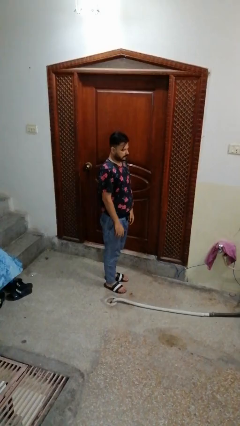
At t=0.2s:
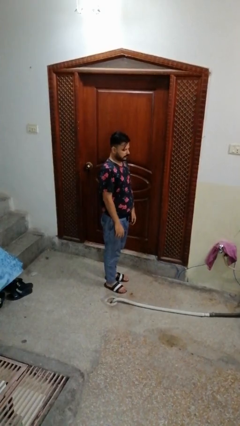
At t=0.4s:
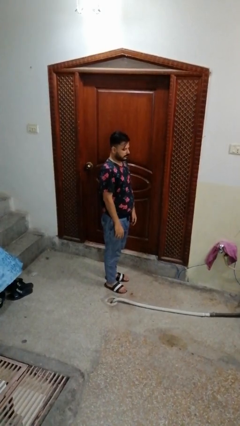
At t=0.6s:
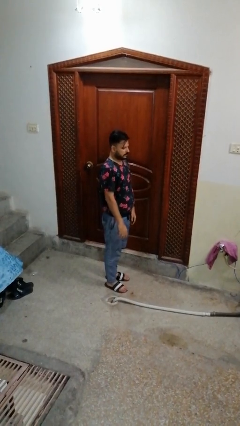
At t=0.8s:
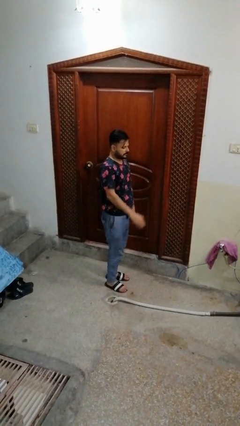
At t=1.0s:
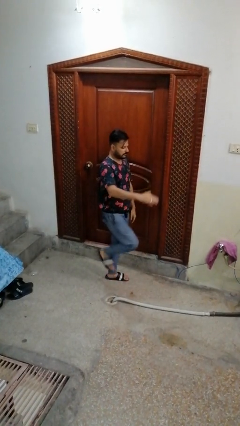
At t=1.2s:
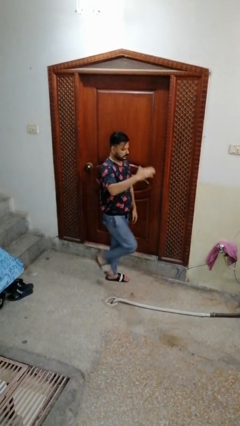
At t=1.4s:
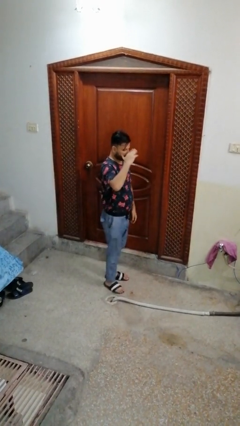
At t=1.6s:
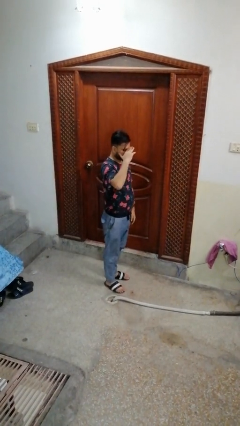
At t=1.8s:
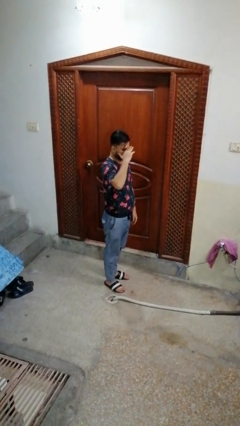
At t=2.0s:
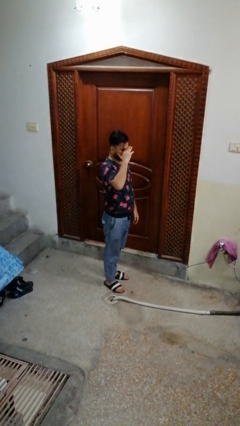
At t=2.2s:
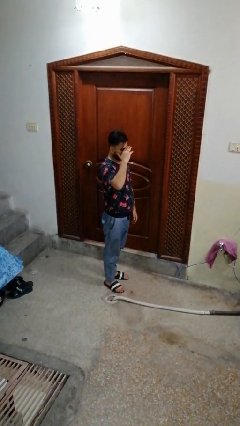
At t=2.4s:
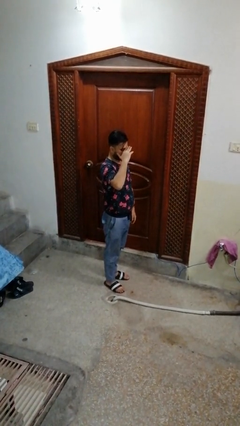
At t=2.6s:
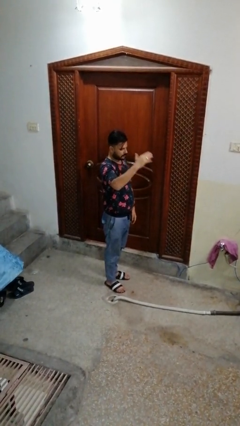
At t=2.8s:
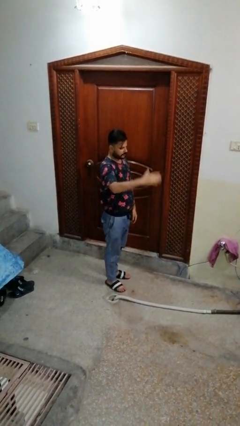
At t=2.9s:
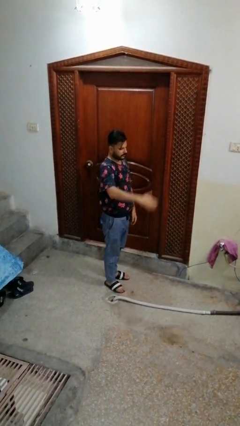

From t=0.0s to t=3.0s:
person salutes

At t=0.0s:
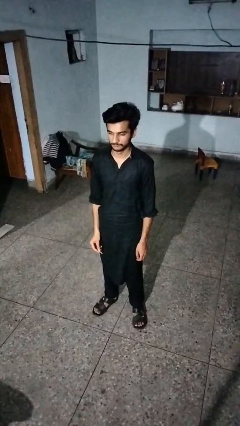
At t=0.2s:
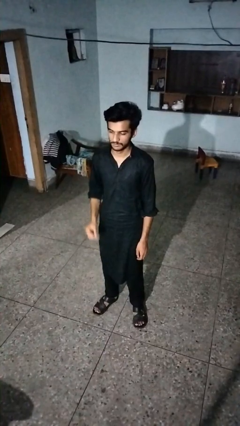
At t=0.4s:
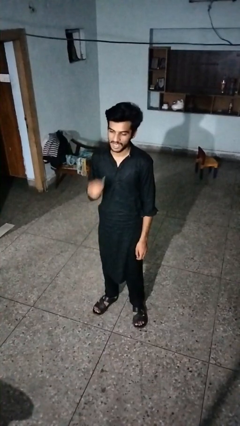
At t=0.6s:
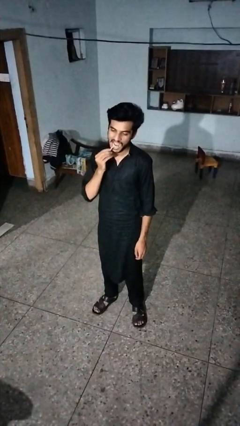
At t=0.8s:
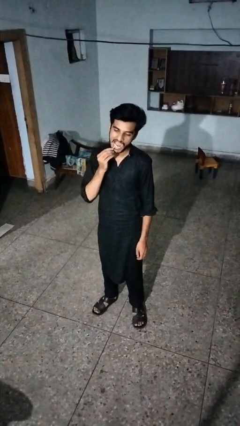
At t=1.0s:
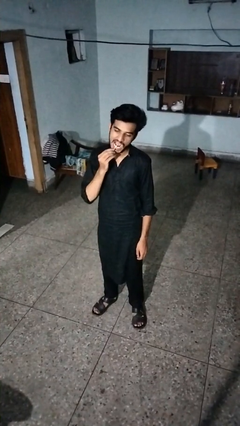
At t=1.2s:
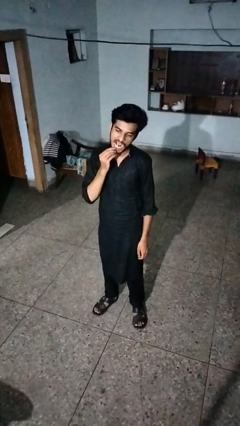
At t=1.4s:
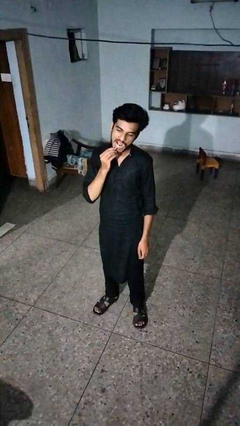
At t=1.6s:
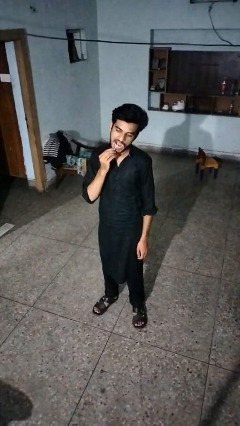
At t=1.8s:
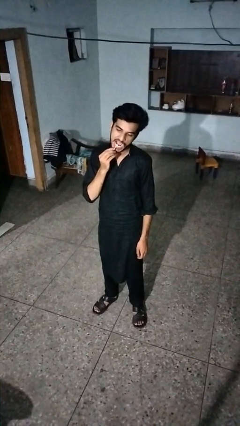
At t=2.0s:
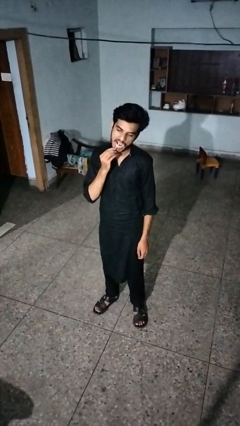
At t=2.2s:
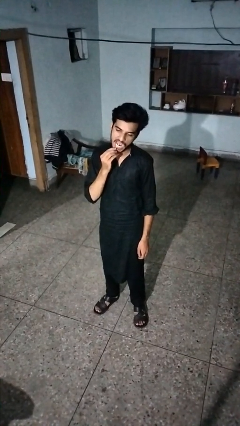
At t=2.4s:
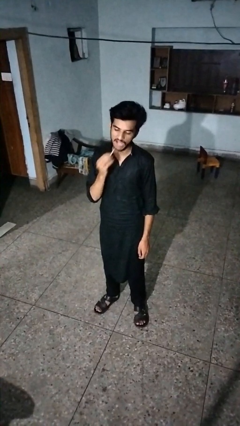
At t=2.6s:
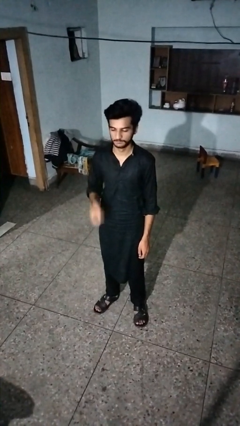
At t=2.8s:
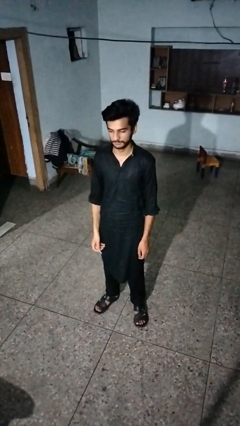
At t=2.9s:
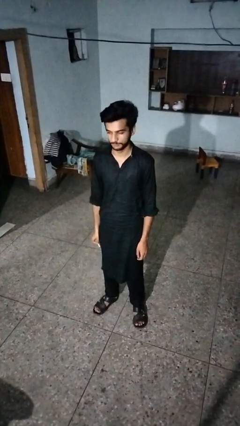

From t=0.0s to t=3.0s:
person flosses

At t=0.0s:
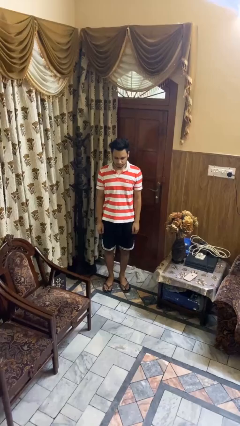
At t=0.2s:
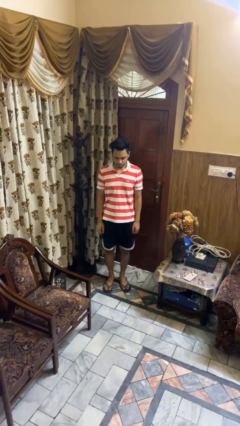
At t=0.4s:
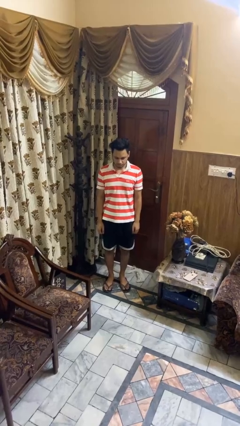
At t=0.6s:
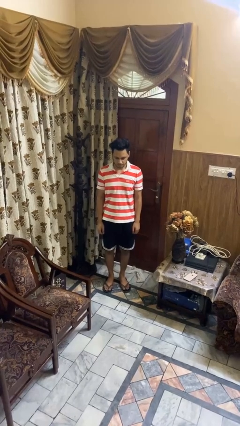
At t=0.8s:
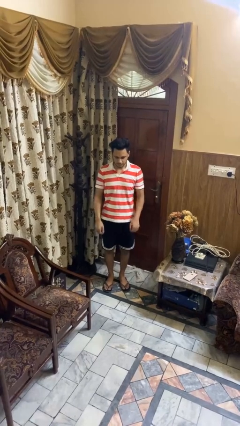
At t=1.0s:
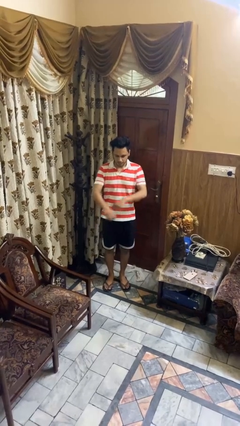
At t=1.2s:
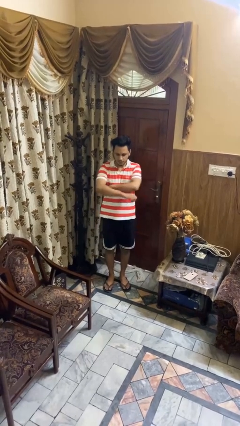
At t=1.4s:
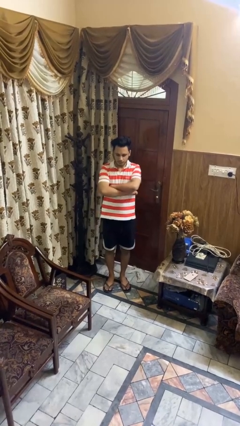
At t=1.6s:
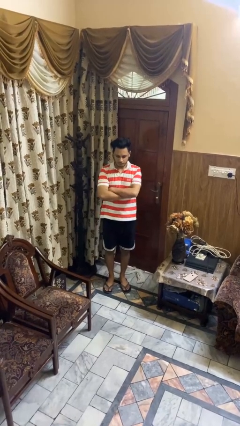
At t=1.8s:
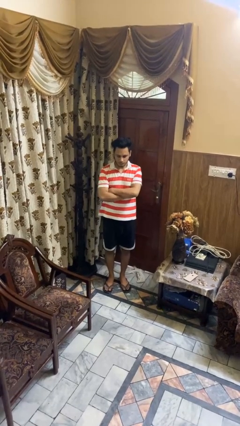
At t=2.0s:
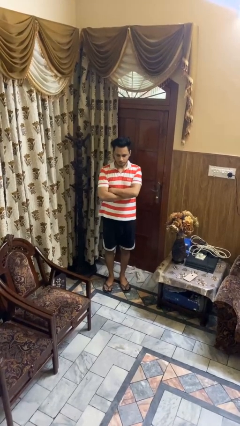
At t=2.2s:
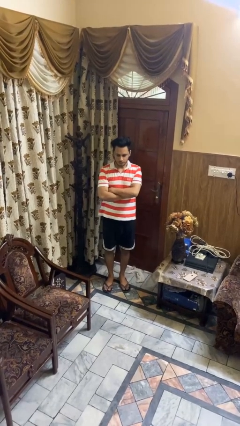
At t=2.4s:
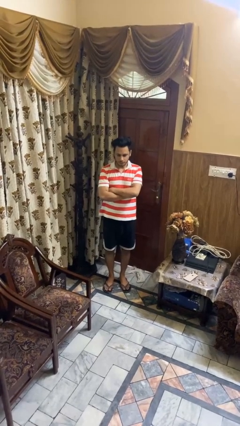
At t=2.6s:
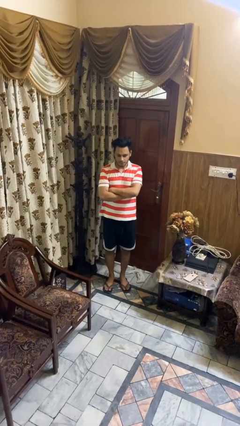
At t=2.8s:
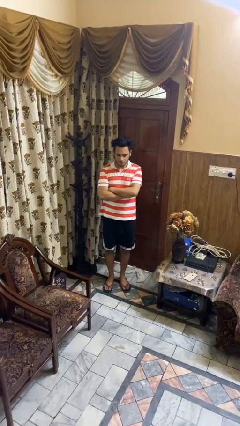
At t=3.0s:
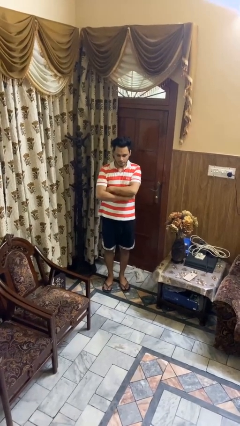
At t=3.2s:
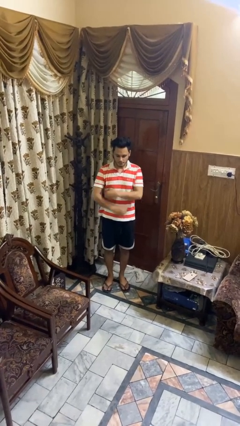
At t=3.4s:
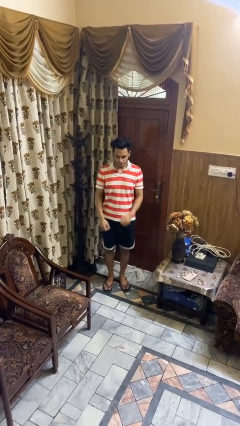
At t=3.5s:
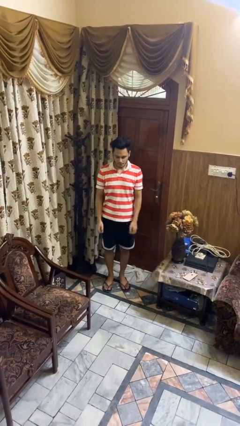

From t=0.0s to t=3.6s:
person crosses arms

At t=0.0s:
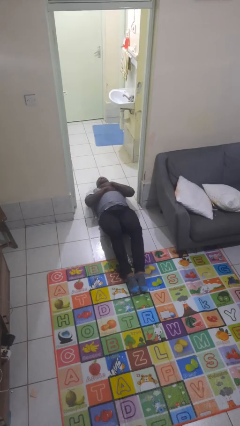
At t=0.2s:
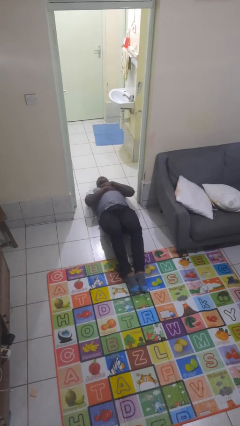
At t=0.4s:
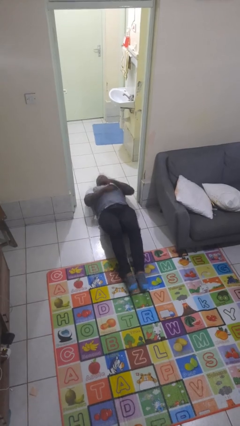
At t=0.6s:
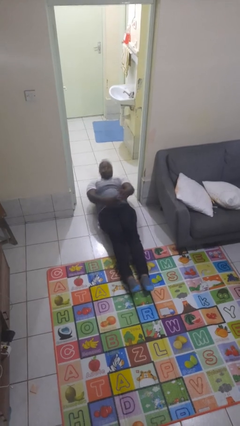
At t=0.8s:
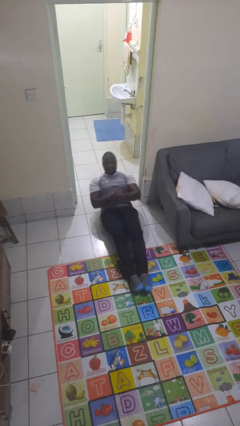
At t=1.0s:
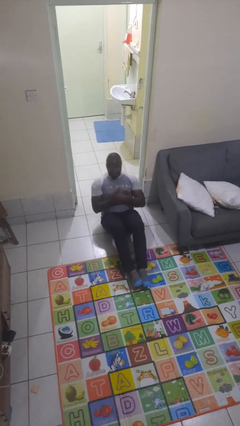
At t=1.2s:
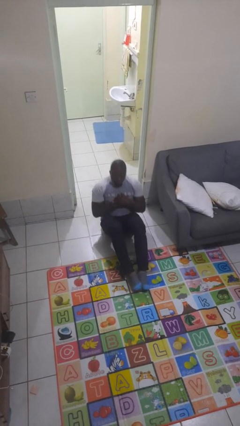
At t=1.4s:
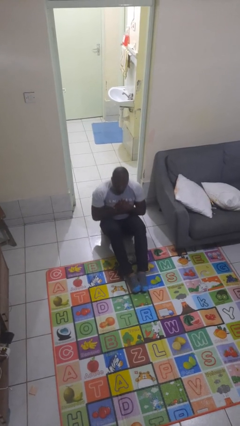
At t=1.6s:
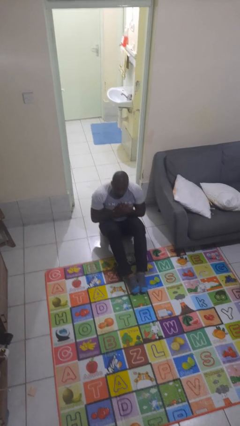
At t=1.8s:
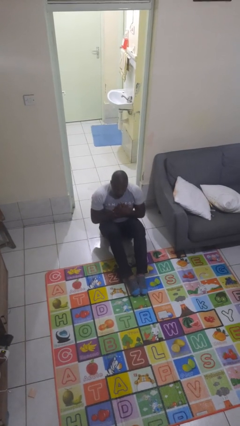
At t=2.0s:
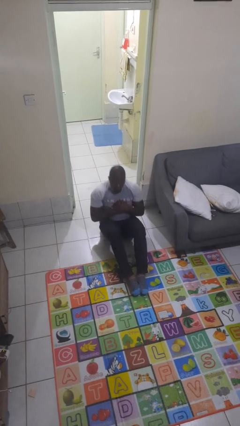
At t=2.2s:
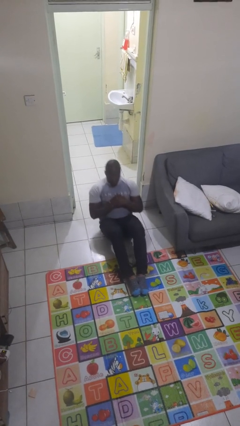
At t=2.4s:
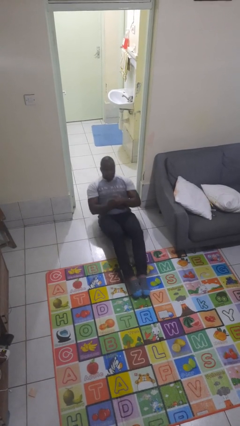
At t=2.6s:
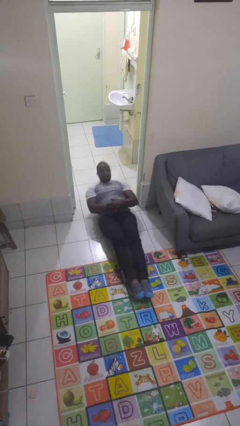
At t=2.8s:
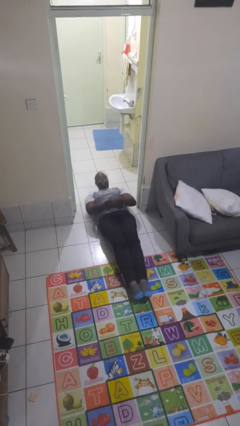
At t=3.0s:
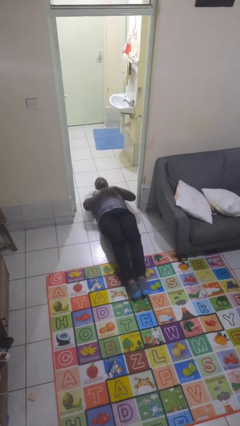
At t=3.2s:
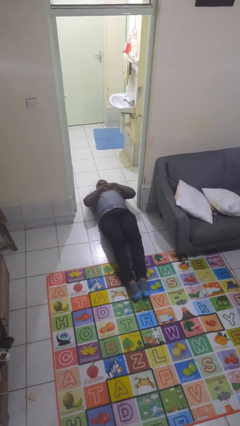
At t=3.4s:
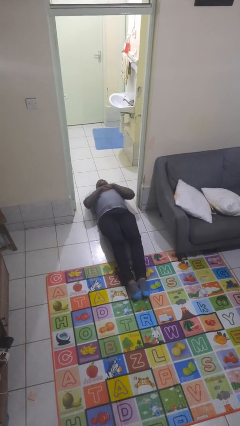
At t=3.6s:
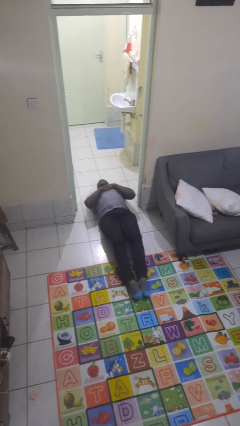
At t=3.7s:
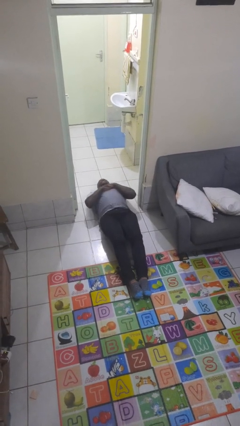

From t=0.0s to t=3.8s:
person exercises with situp

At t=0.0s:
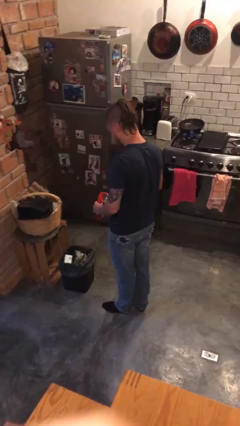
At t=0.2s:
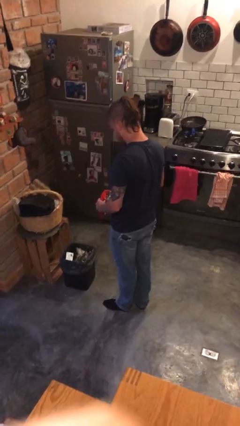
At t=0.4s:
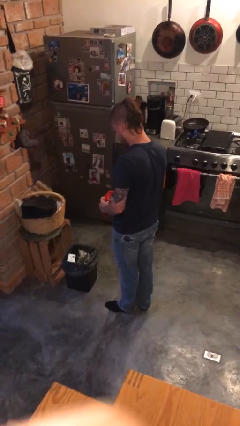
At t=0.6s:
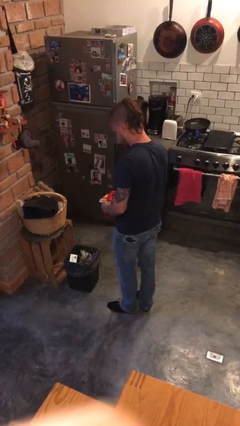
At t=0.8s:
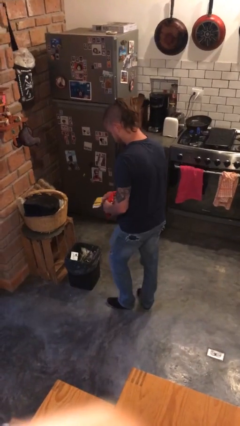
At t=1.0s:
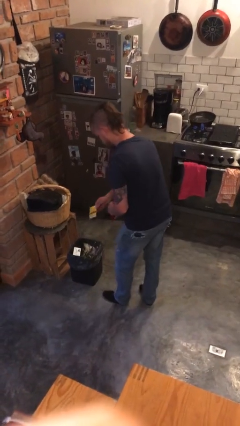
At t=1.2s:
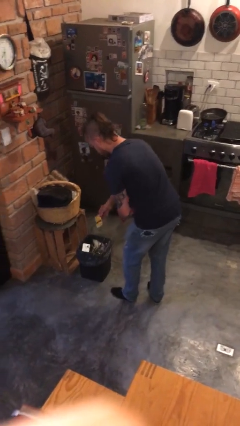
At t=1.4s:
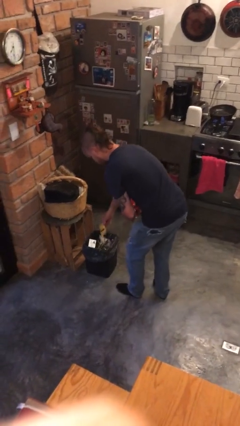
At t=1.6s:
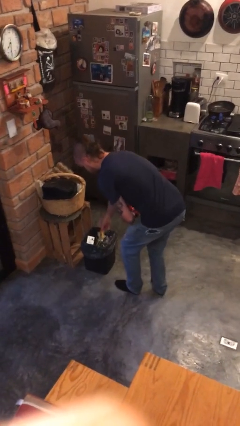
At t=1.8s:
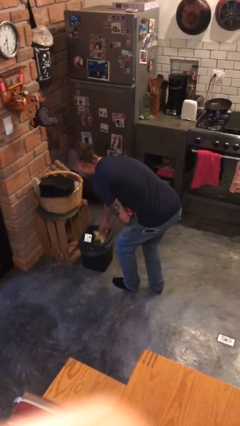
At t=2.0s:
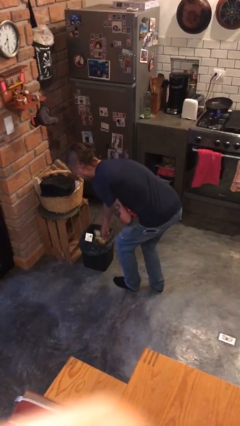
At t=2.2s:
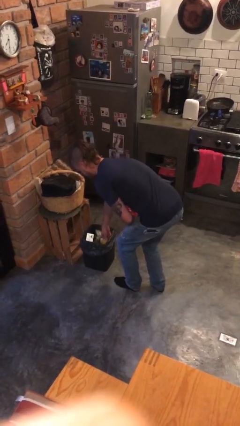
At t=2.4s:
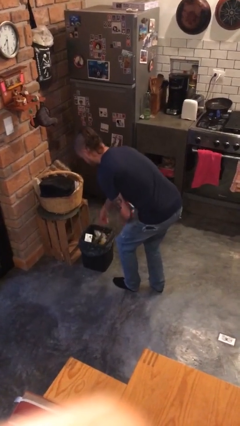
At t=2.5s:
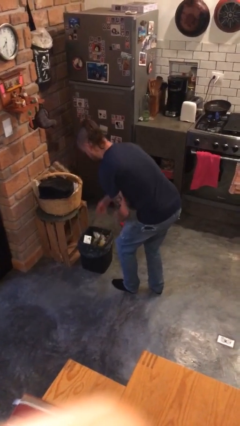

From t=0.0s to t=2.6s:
person discards trash

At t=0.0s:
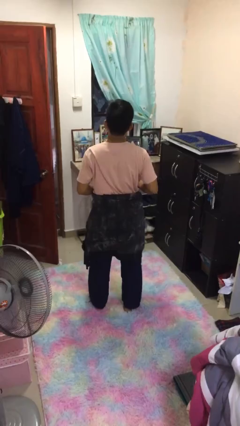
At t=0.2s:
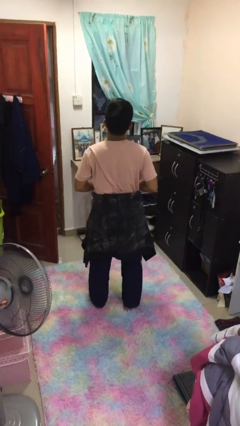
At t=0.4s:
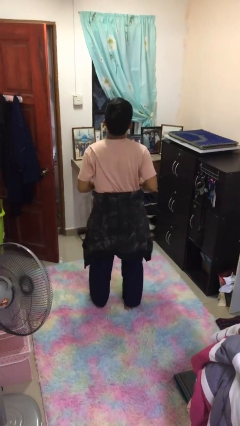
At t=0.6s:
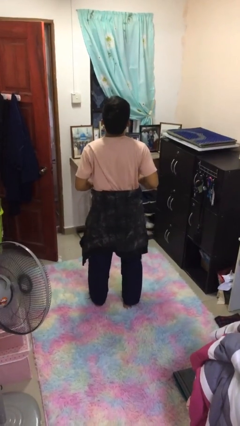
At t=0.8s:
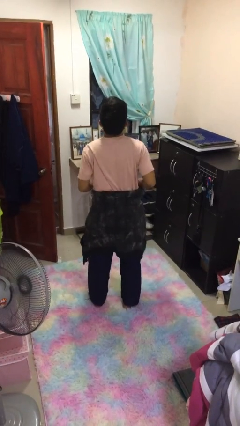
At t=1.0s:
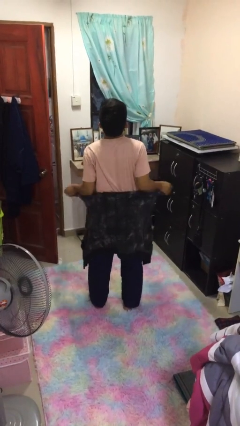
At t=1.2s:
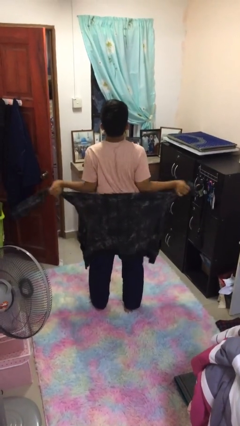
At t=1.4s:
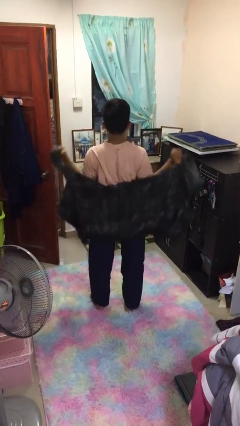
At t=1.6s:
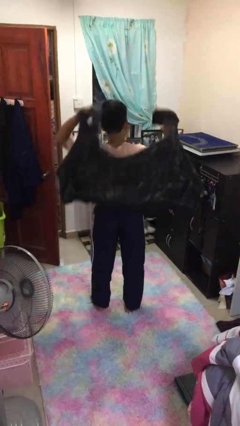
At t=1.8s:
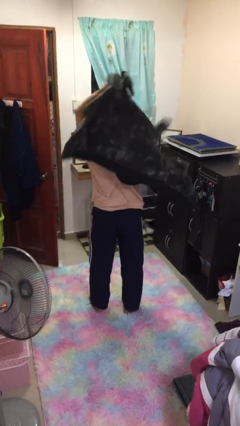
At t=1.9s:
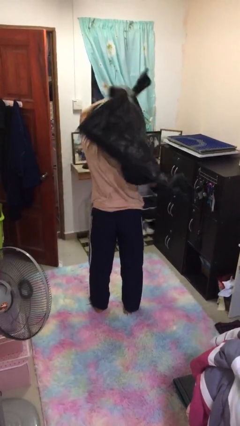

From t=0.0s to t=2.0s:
person unties jacket around waist
